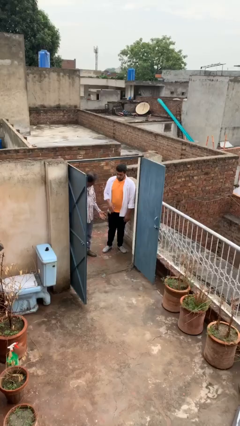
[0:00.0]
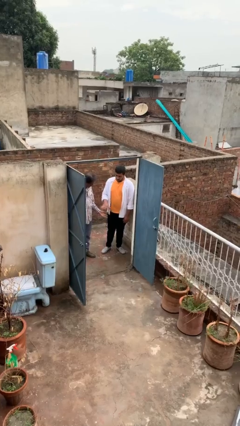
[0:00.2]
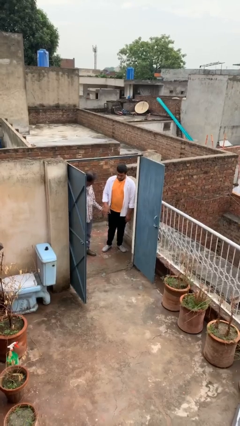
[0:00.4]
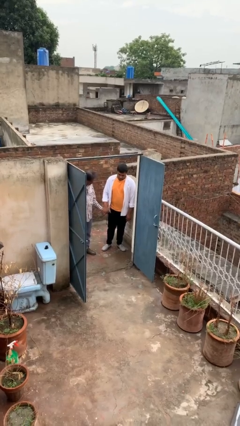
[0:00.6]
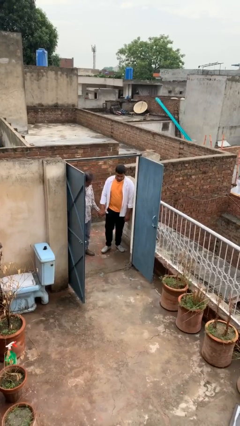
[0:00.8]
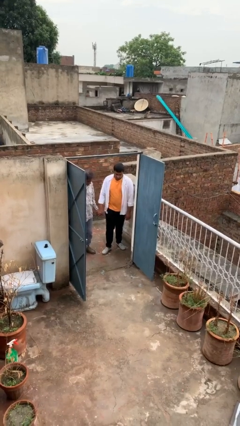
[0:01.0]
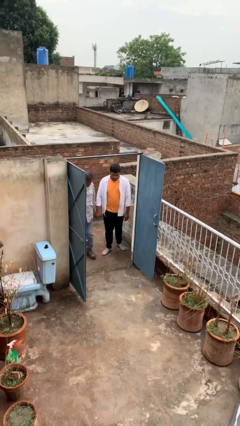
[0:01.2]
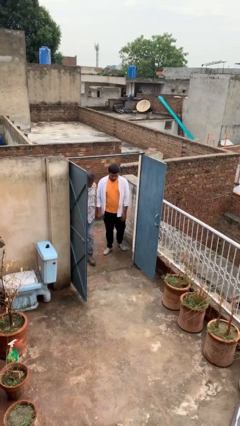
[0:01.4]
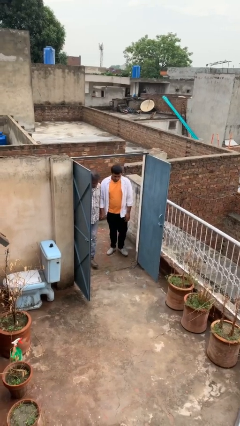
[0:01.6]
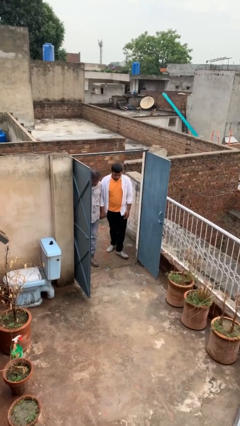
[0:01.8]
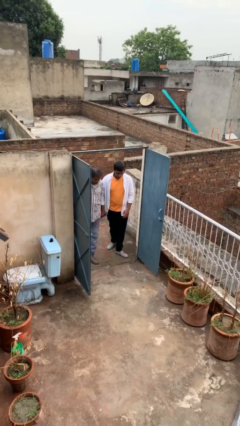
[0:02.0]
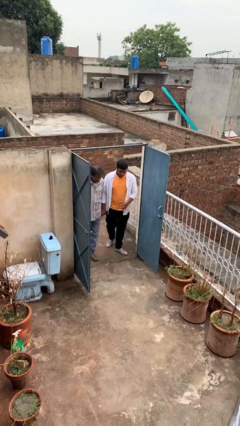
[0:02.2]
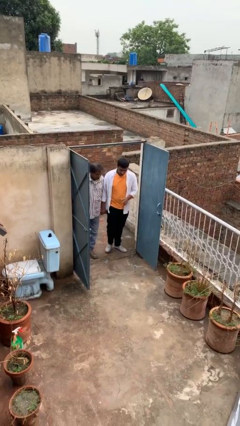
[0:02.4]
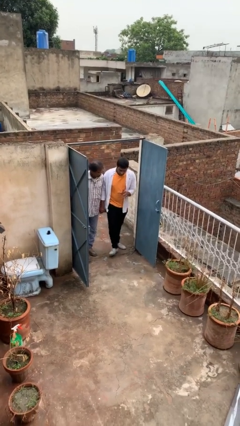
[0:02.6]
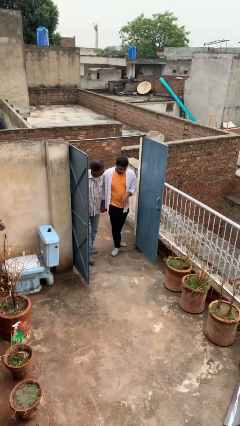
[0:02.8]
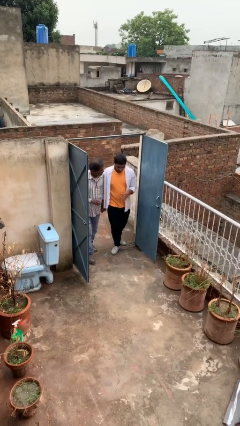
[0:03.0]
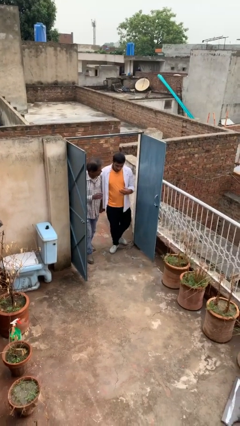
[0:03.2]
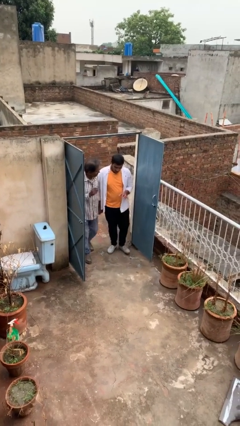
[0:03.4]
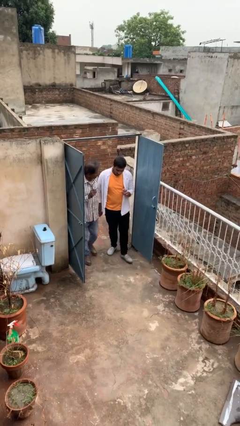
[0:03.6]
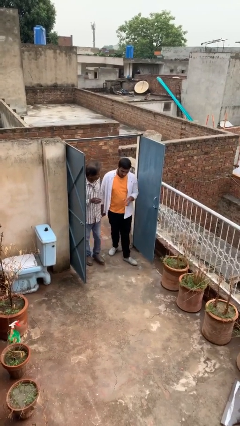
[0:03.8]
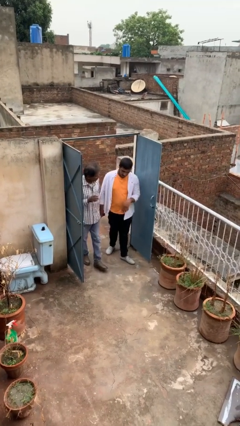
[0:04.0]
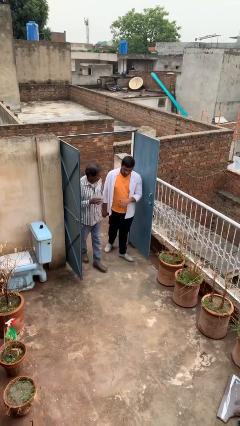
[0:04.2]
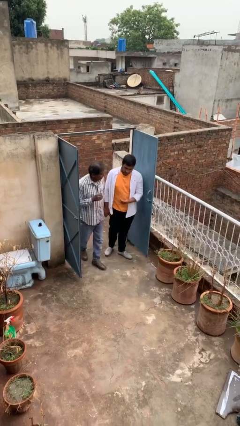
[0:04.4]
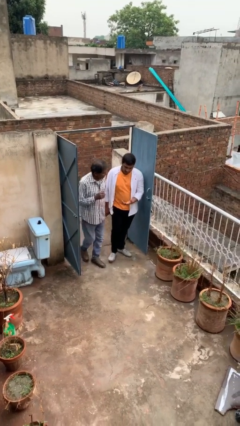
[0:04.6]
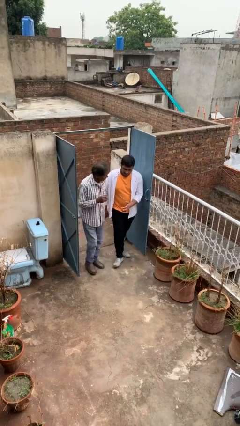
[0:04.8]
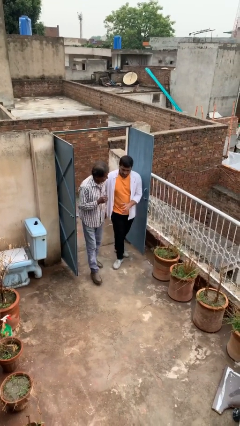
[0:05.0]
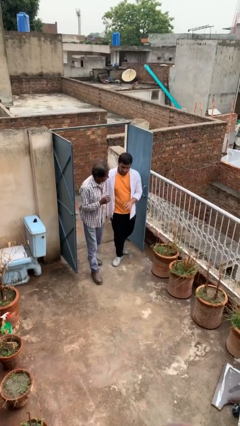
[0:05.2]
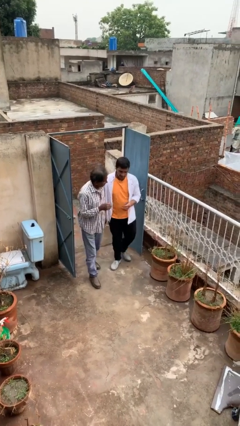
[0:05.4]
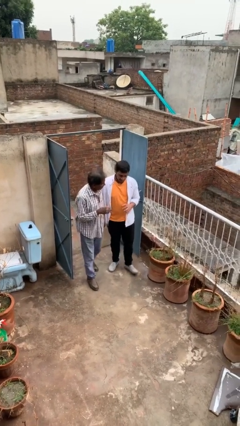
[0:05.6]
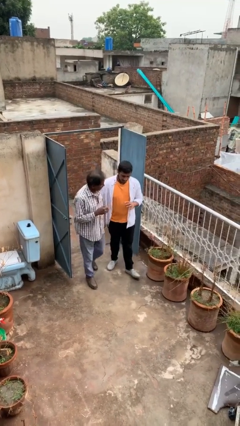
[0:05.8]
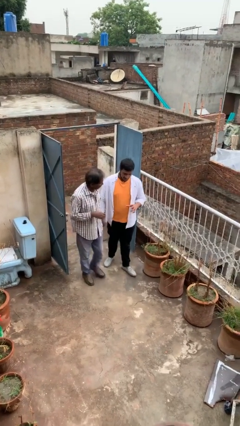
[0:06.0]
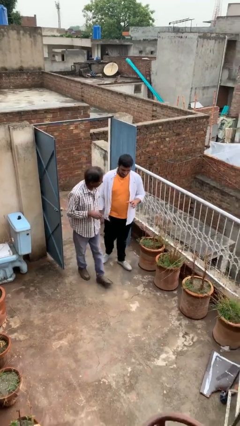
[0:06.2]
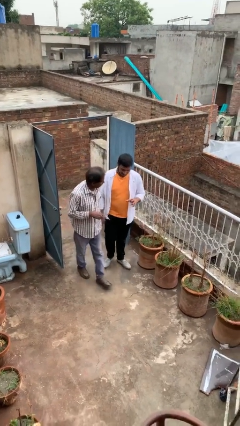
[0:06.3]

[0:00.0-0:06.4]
person holds hand

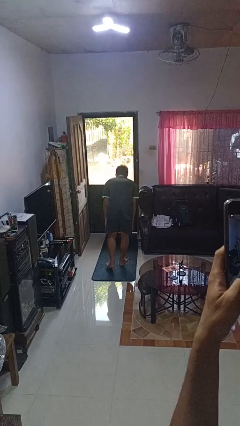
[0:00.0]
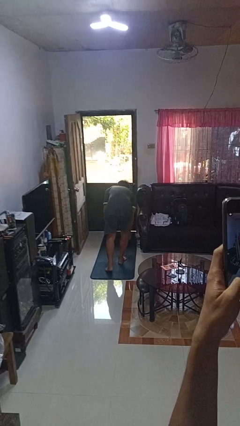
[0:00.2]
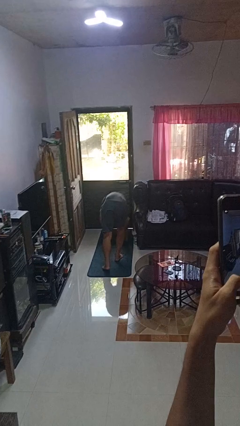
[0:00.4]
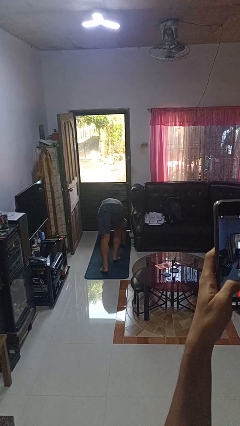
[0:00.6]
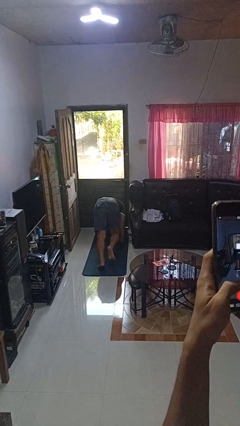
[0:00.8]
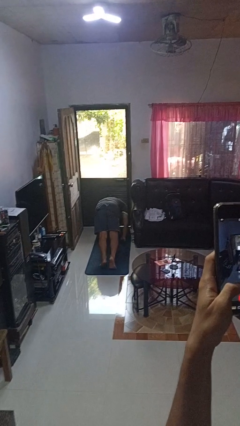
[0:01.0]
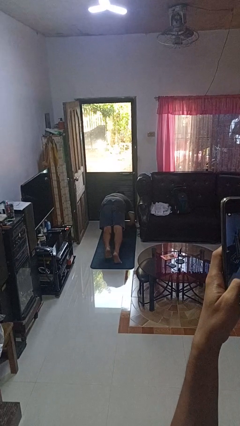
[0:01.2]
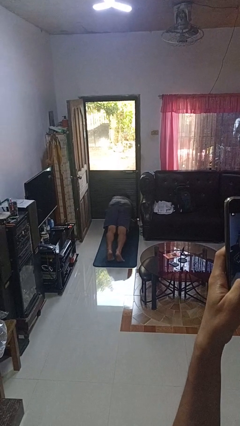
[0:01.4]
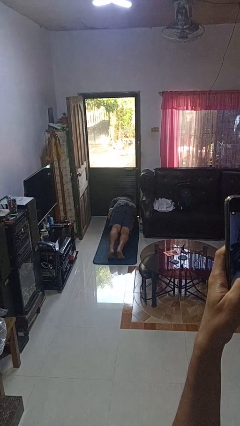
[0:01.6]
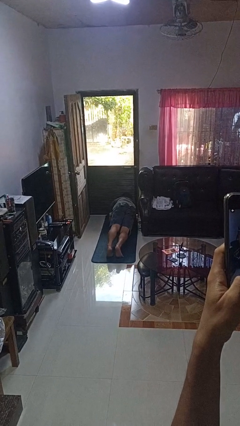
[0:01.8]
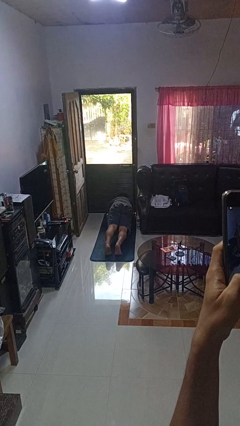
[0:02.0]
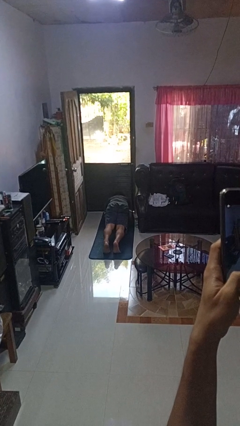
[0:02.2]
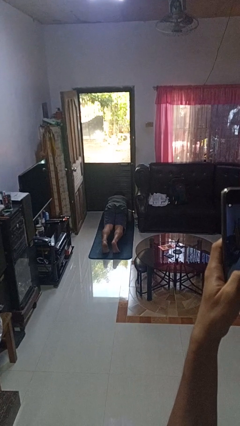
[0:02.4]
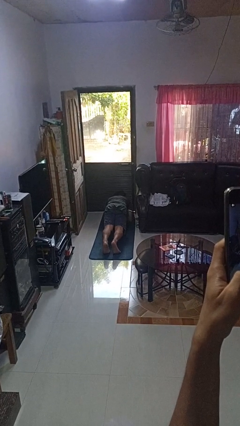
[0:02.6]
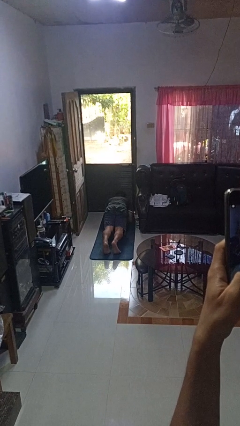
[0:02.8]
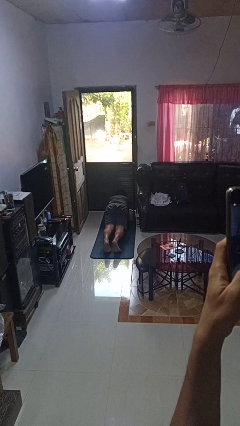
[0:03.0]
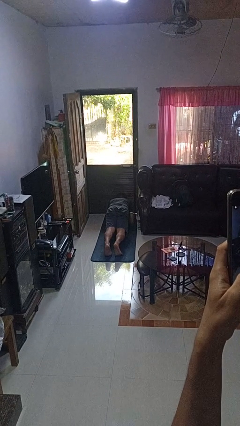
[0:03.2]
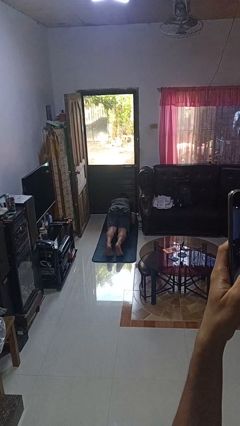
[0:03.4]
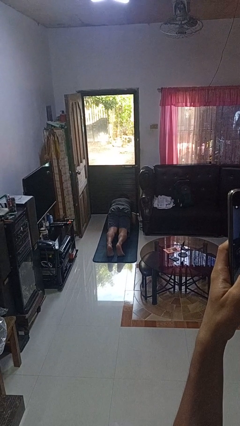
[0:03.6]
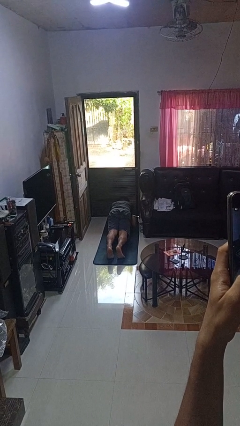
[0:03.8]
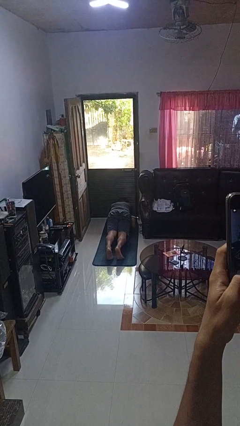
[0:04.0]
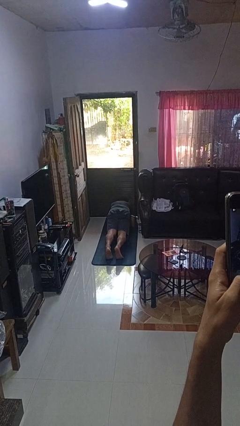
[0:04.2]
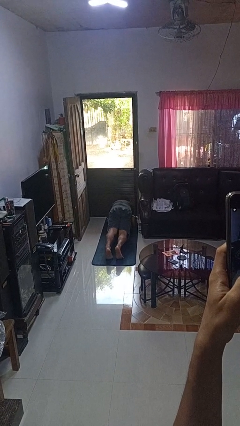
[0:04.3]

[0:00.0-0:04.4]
person exercises with plank

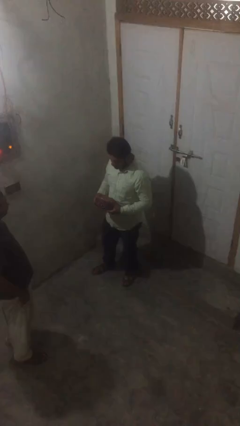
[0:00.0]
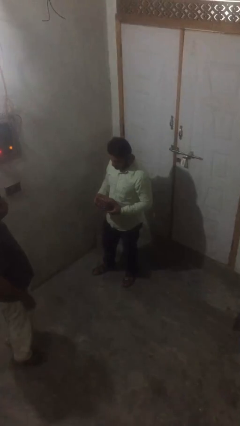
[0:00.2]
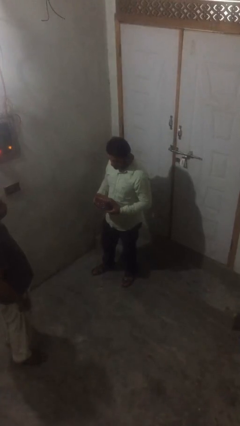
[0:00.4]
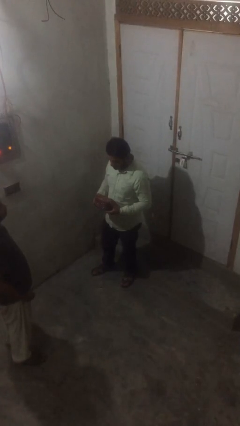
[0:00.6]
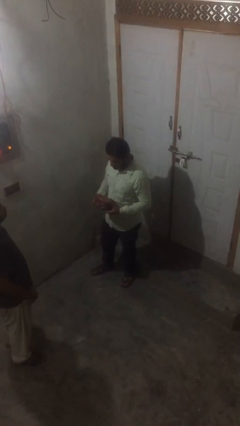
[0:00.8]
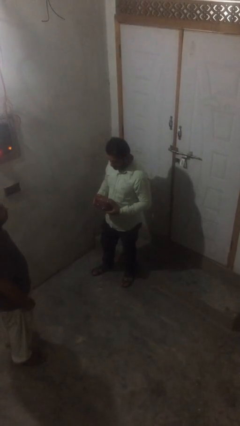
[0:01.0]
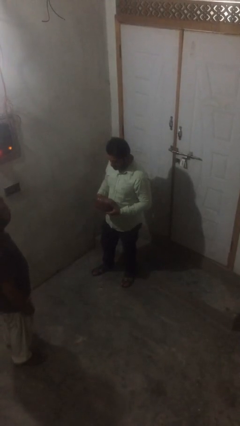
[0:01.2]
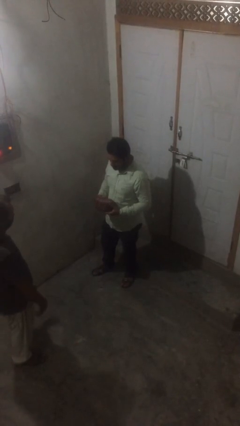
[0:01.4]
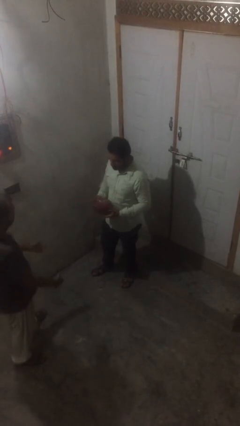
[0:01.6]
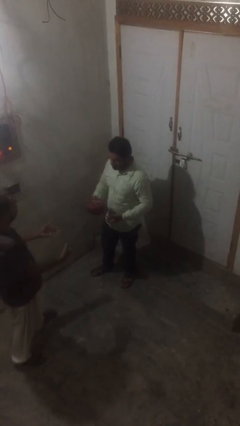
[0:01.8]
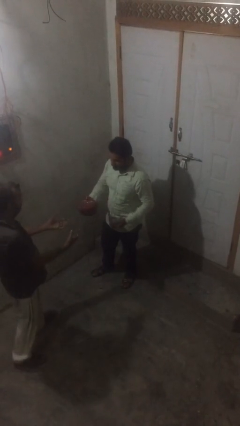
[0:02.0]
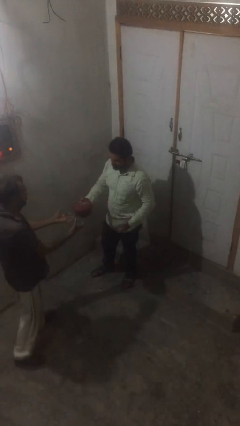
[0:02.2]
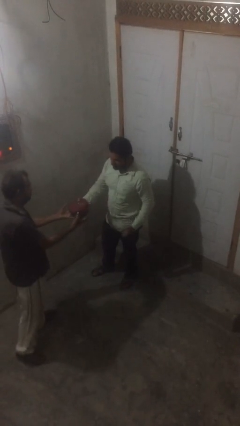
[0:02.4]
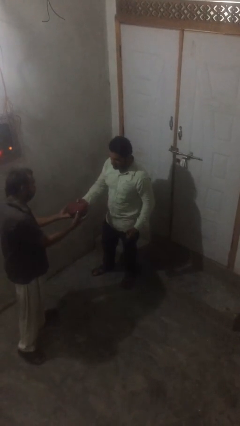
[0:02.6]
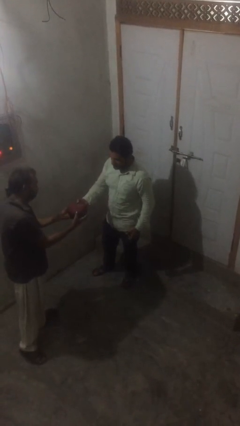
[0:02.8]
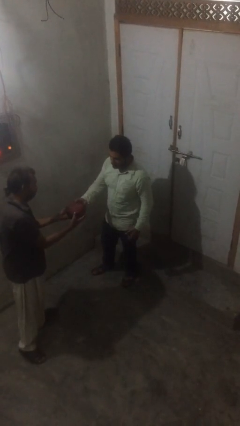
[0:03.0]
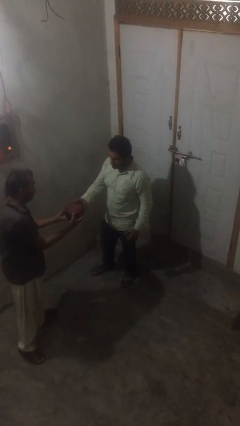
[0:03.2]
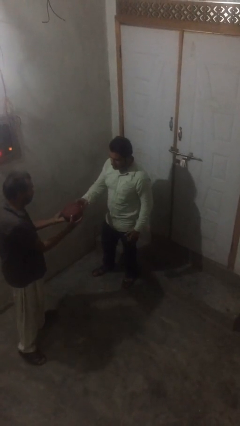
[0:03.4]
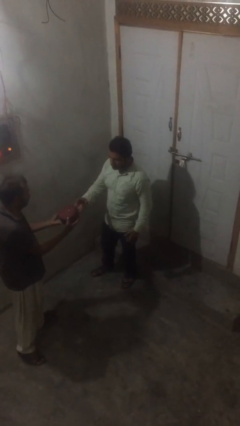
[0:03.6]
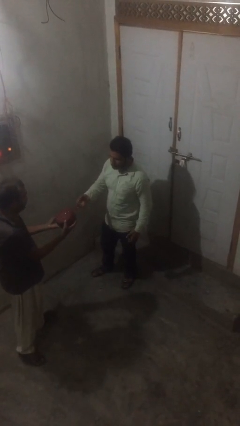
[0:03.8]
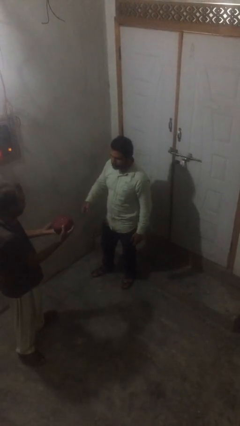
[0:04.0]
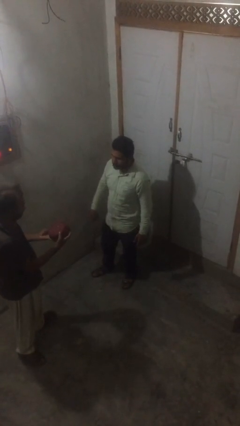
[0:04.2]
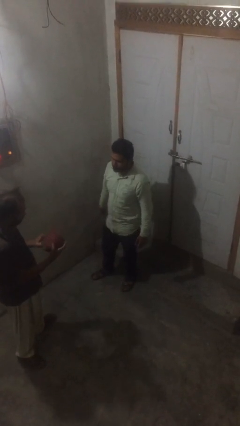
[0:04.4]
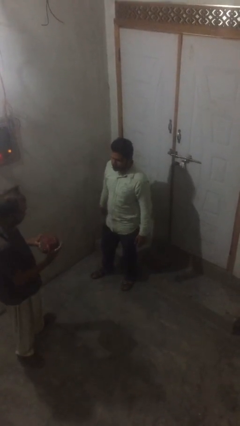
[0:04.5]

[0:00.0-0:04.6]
person transfers object to person

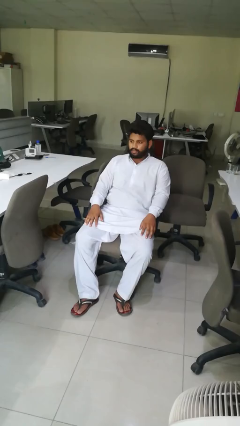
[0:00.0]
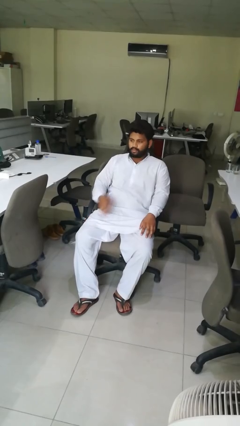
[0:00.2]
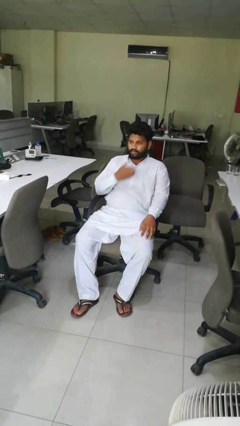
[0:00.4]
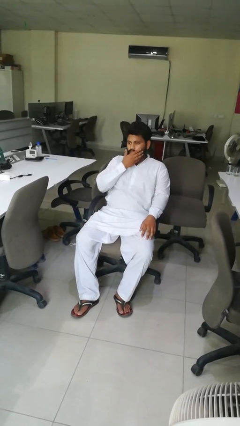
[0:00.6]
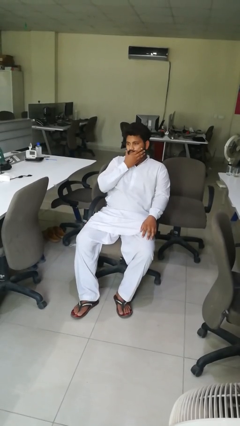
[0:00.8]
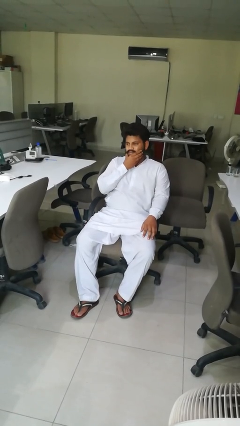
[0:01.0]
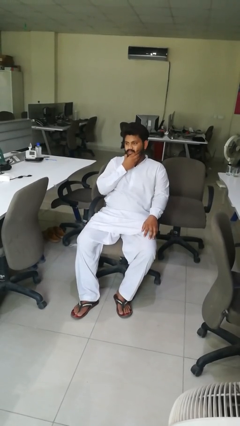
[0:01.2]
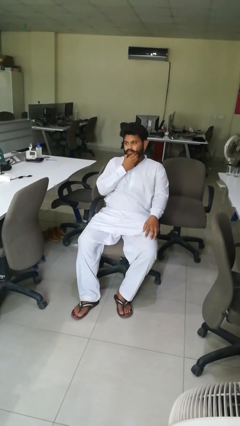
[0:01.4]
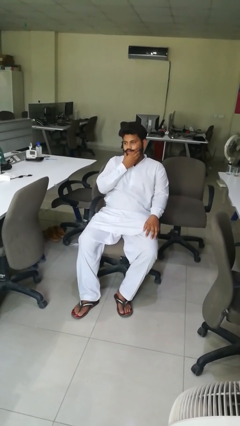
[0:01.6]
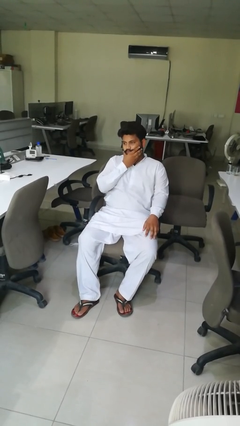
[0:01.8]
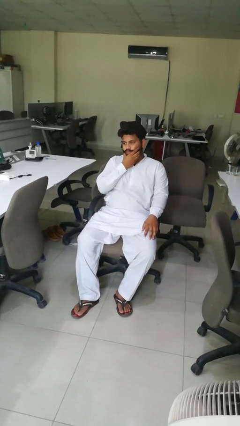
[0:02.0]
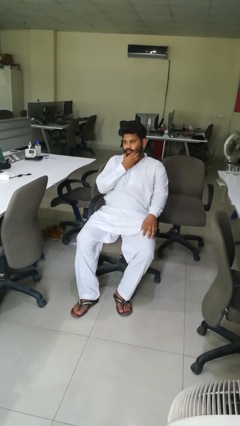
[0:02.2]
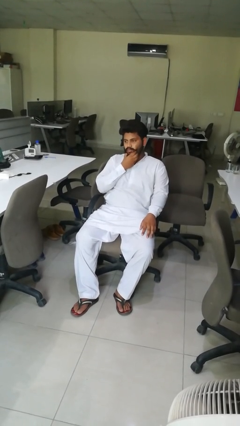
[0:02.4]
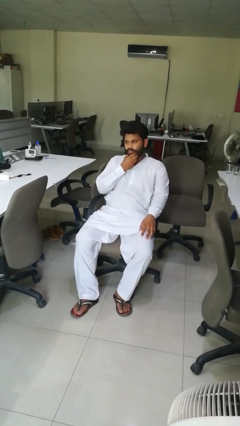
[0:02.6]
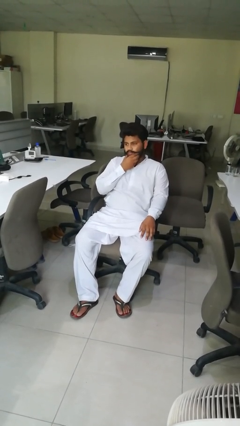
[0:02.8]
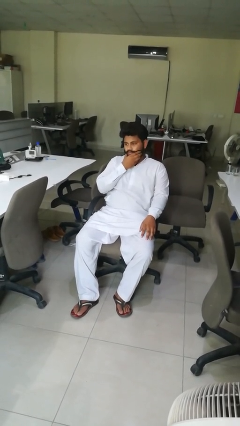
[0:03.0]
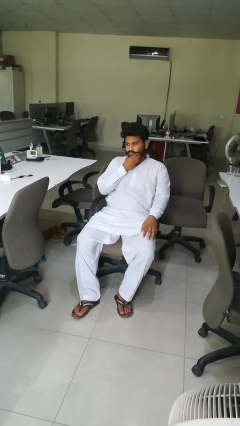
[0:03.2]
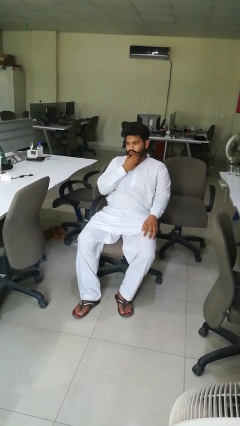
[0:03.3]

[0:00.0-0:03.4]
person strokes chin
